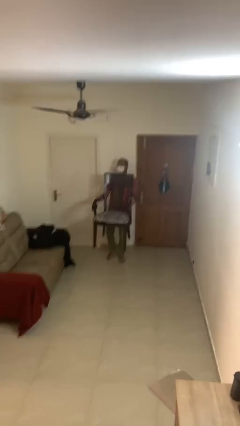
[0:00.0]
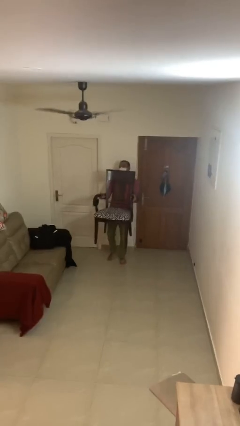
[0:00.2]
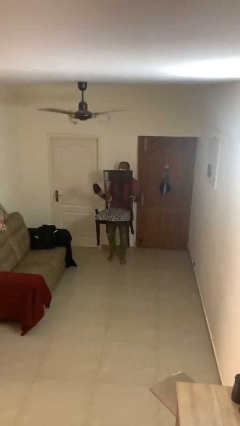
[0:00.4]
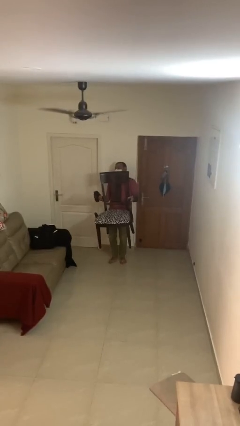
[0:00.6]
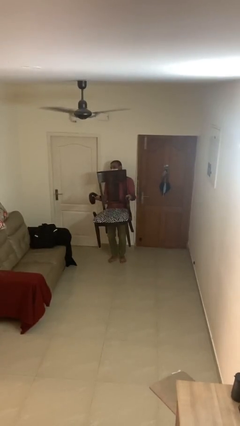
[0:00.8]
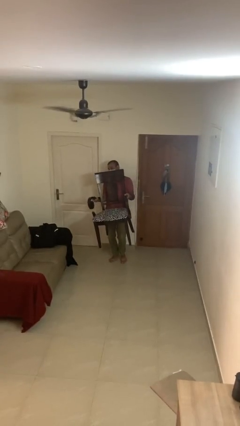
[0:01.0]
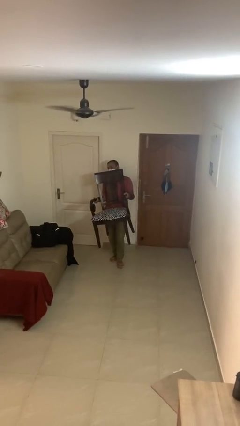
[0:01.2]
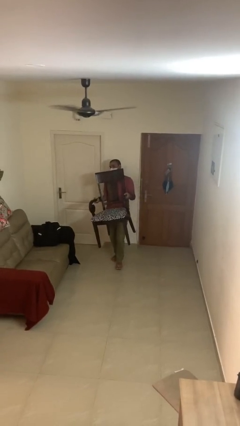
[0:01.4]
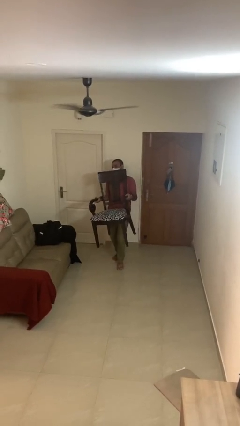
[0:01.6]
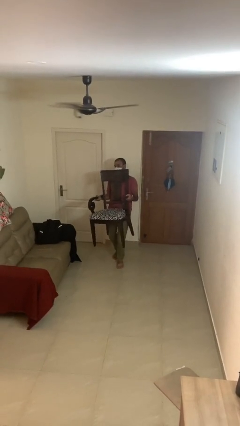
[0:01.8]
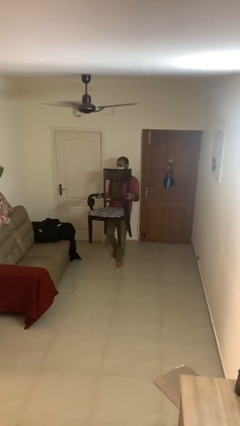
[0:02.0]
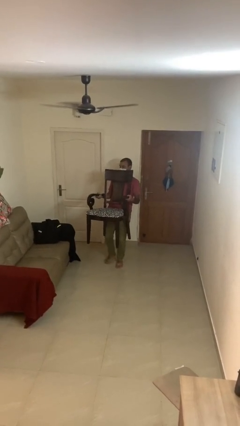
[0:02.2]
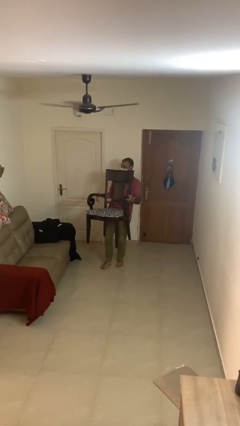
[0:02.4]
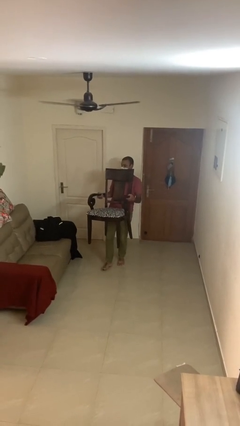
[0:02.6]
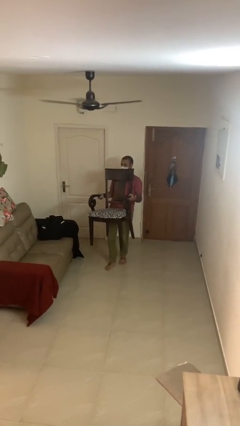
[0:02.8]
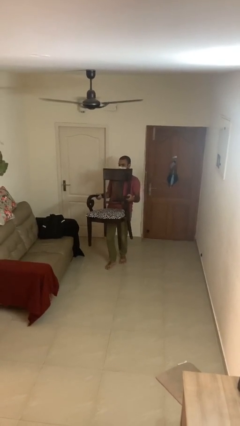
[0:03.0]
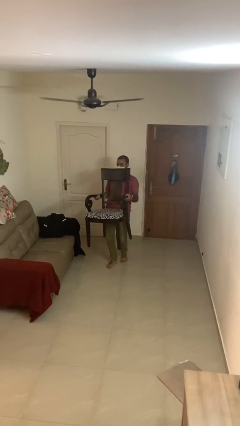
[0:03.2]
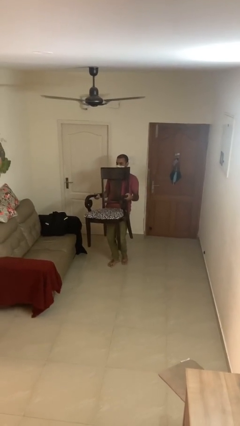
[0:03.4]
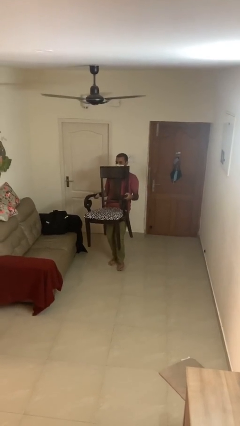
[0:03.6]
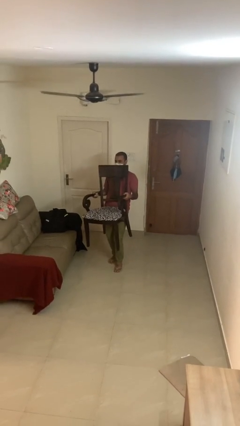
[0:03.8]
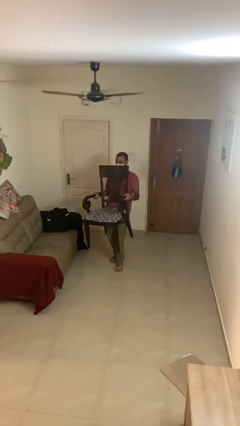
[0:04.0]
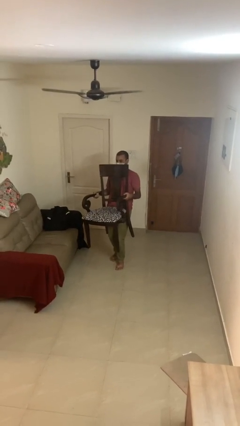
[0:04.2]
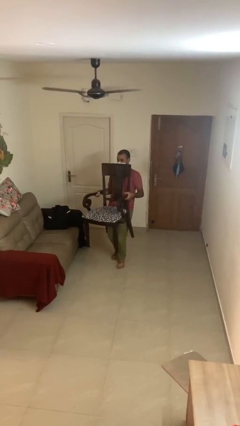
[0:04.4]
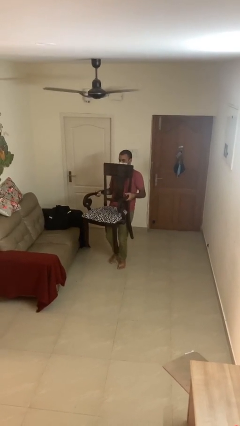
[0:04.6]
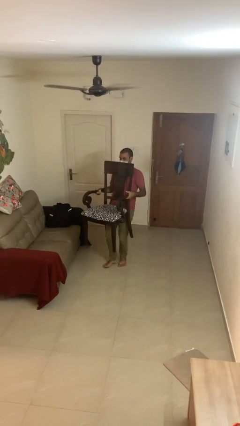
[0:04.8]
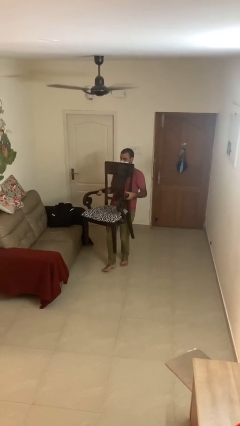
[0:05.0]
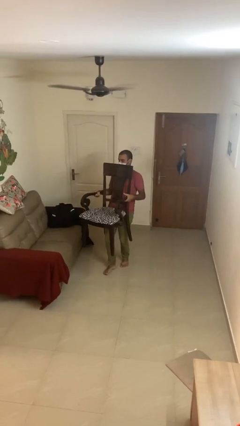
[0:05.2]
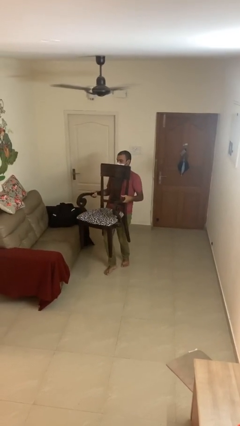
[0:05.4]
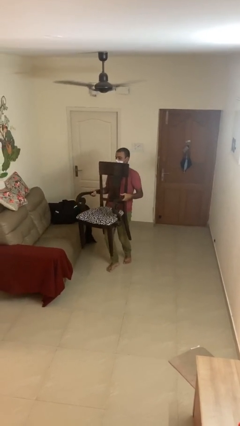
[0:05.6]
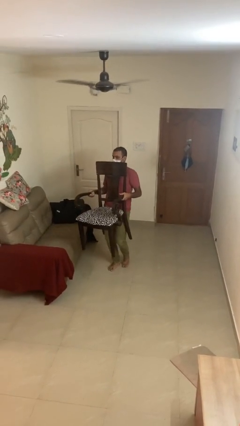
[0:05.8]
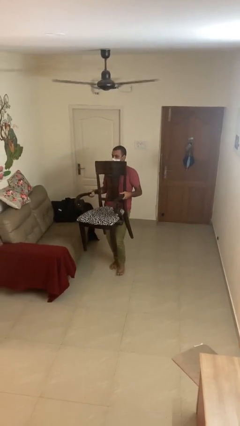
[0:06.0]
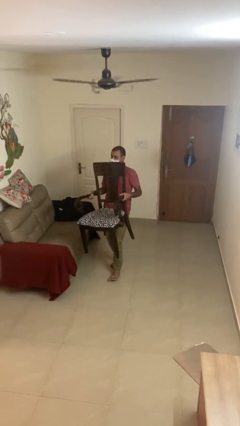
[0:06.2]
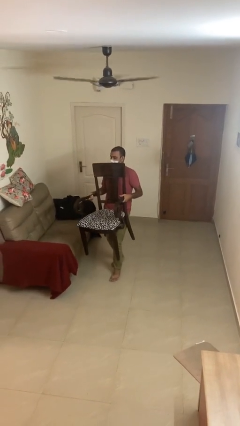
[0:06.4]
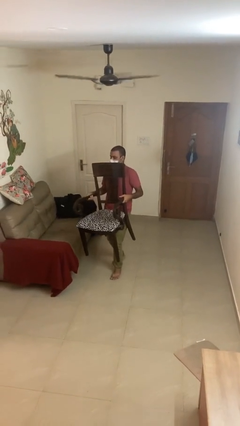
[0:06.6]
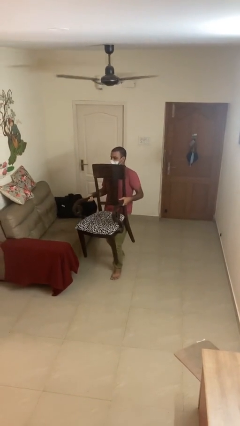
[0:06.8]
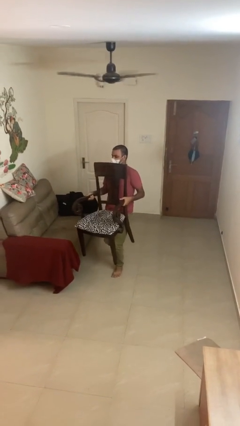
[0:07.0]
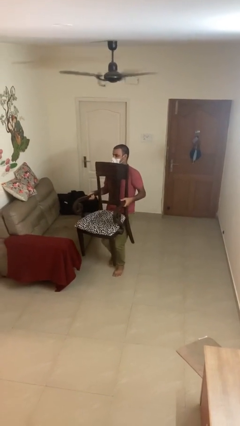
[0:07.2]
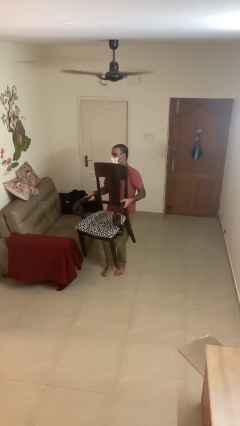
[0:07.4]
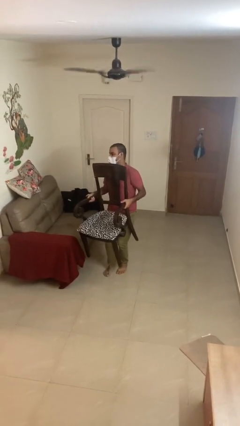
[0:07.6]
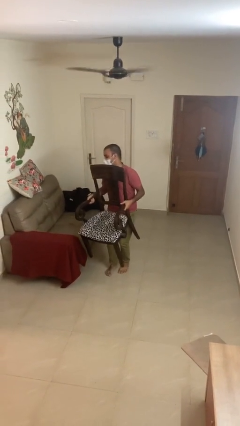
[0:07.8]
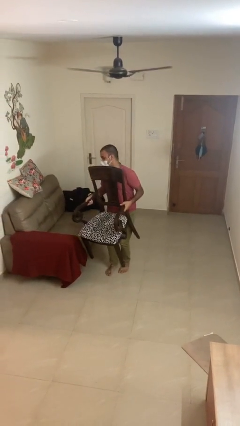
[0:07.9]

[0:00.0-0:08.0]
person carries heavy object

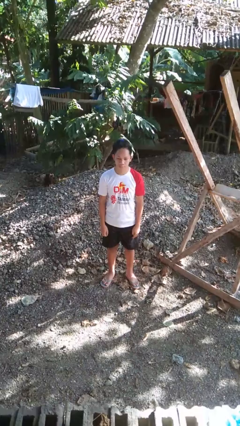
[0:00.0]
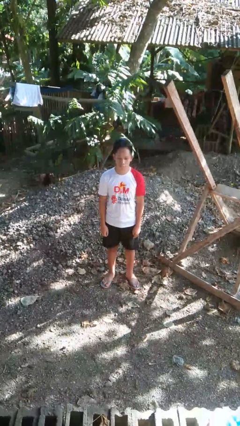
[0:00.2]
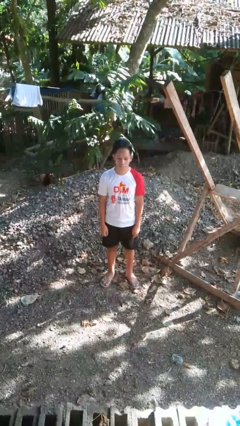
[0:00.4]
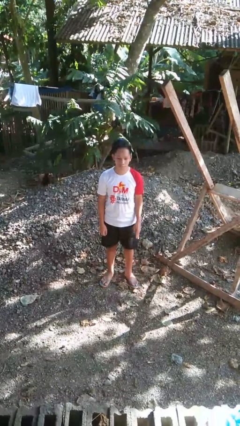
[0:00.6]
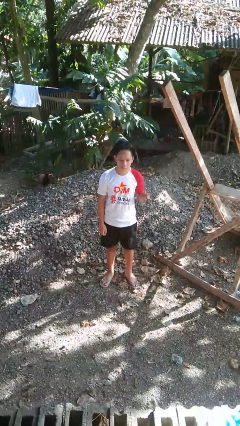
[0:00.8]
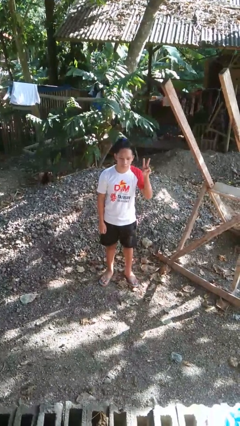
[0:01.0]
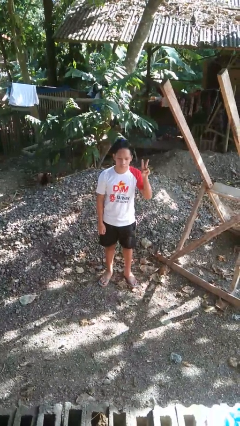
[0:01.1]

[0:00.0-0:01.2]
person gestures peace

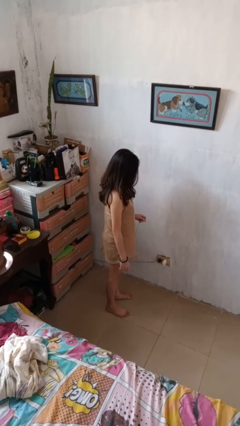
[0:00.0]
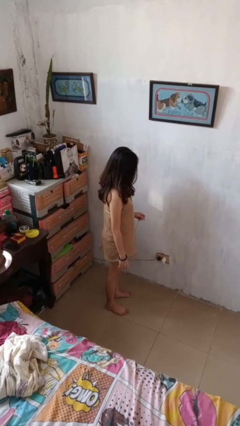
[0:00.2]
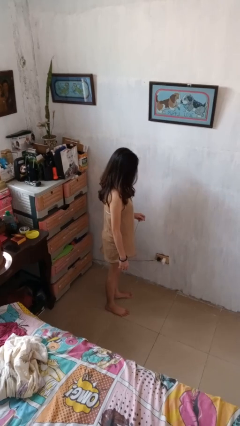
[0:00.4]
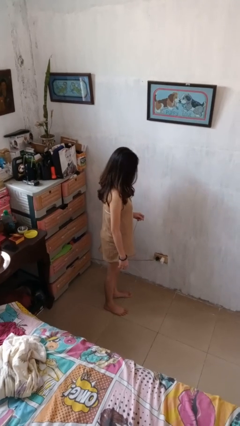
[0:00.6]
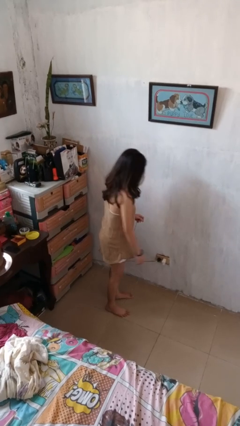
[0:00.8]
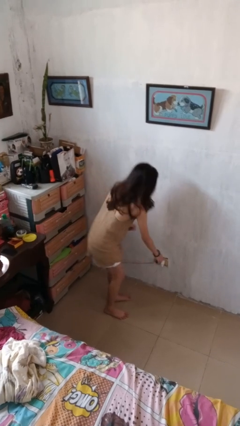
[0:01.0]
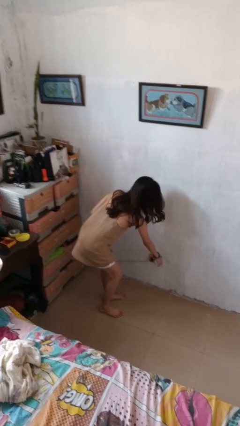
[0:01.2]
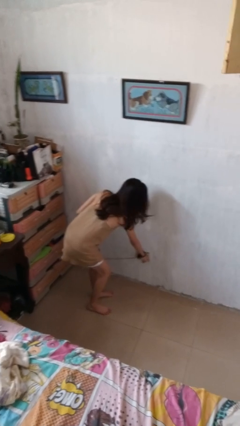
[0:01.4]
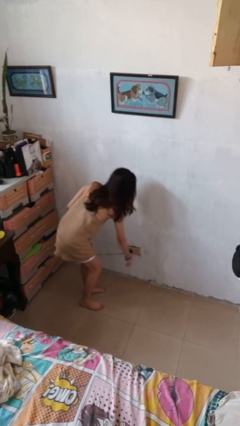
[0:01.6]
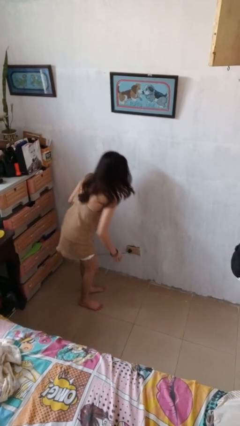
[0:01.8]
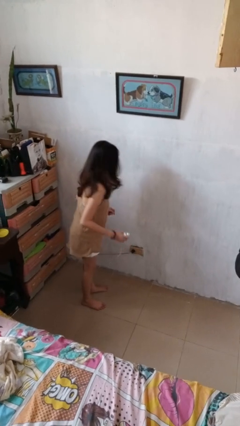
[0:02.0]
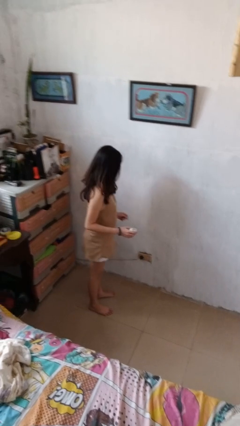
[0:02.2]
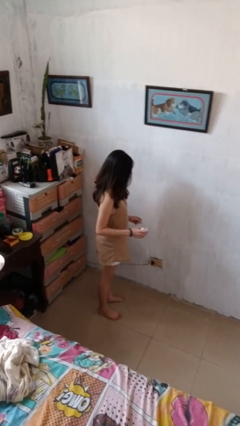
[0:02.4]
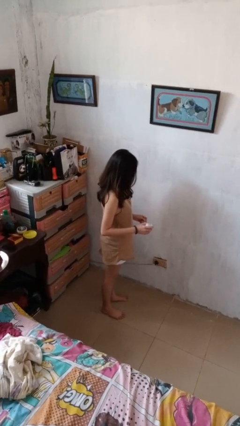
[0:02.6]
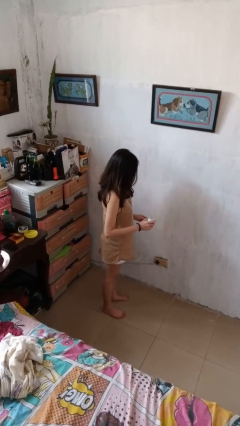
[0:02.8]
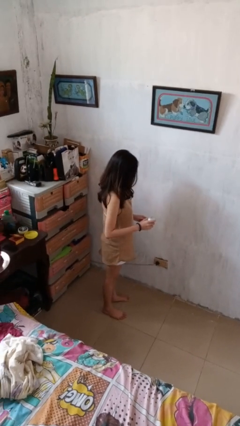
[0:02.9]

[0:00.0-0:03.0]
person unplugs from electrical socket

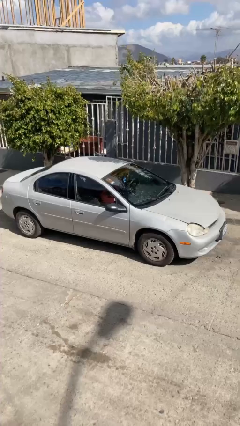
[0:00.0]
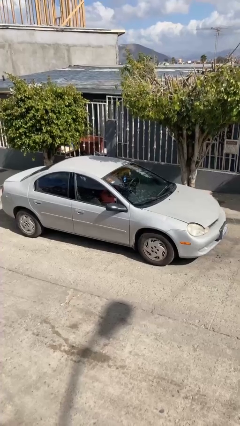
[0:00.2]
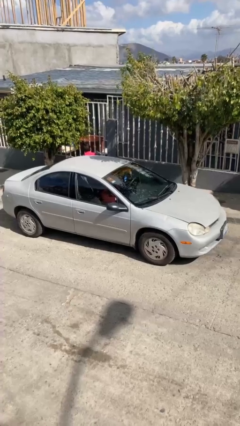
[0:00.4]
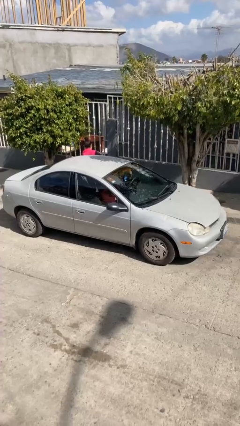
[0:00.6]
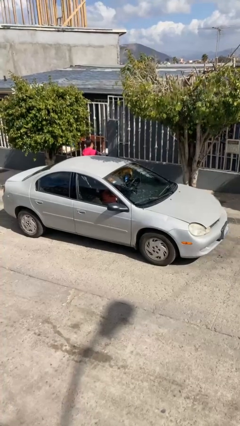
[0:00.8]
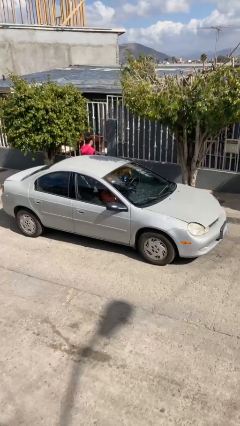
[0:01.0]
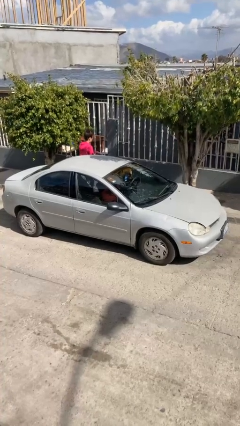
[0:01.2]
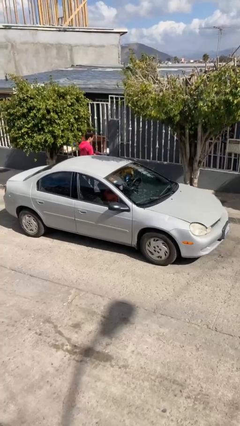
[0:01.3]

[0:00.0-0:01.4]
car drops off person

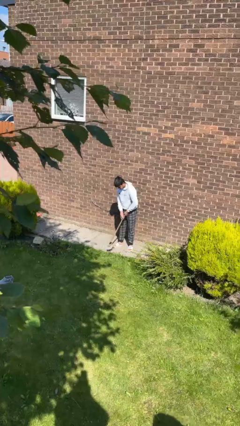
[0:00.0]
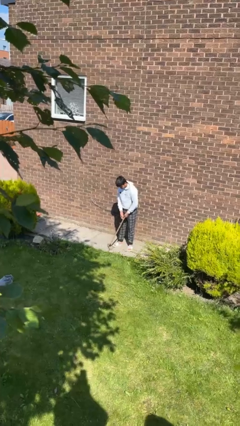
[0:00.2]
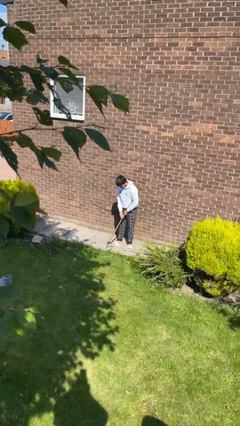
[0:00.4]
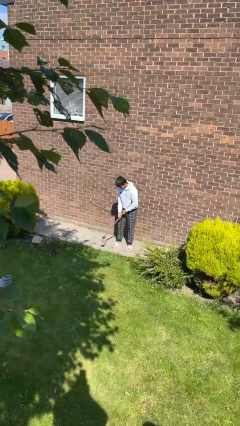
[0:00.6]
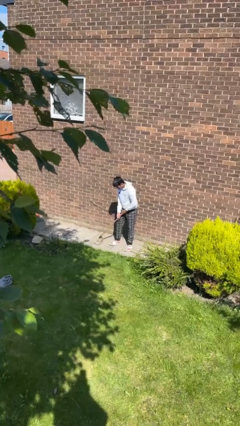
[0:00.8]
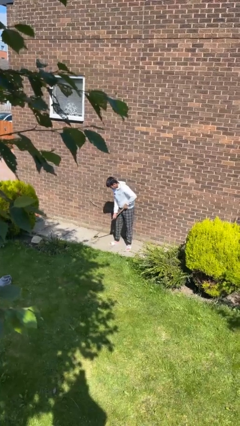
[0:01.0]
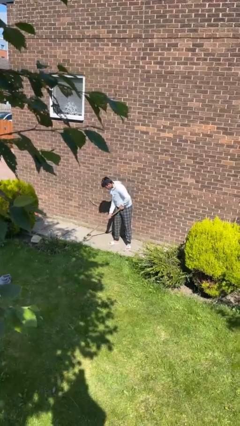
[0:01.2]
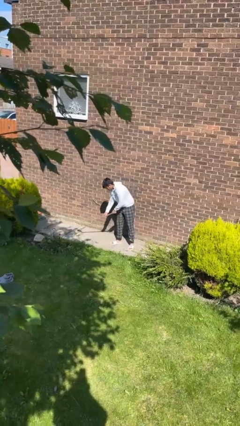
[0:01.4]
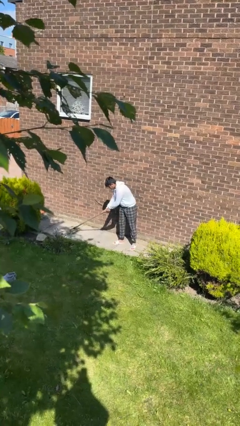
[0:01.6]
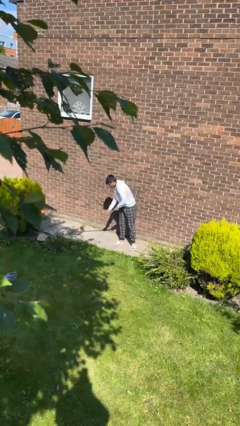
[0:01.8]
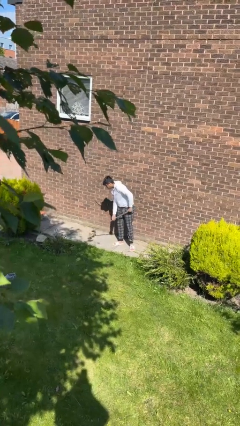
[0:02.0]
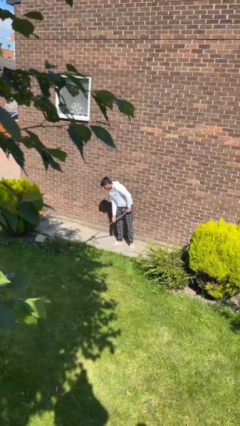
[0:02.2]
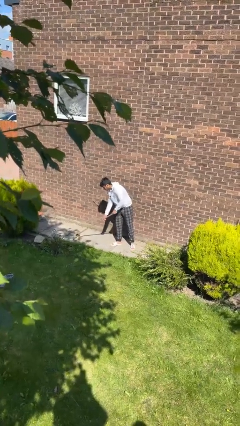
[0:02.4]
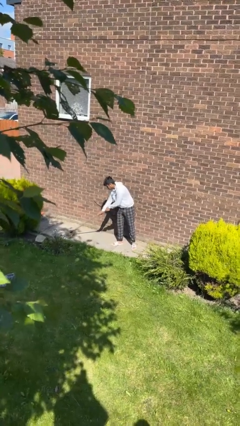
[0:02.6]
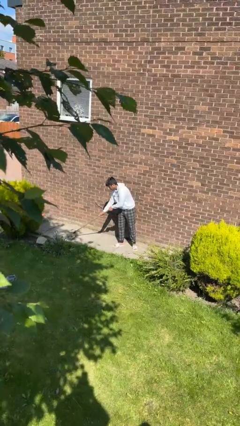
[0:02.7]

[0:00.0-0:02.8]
person sweeps floor

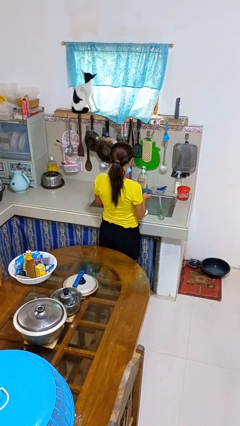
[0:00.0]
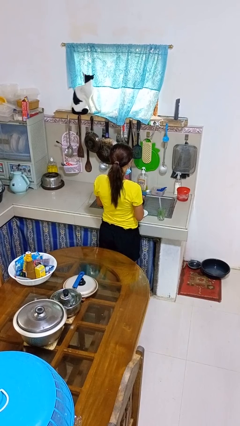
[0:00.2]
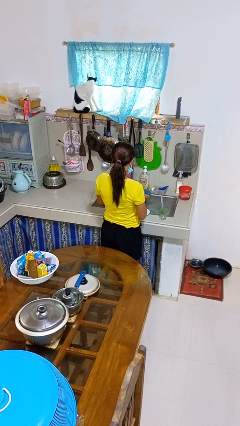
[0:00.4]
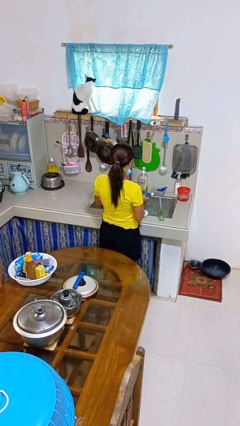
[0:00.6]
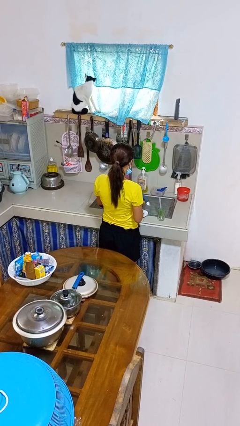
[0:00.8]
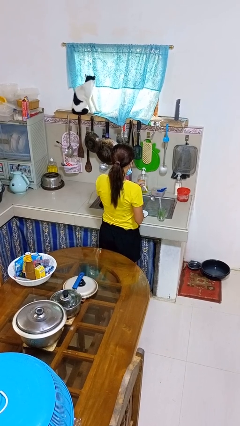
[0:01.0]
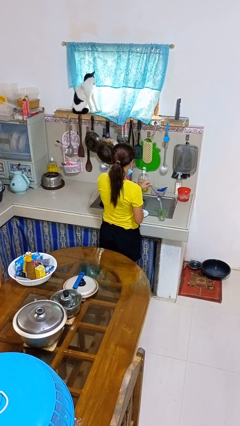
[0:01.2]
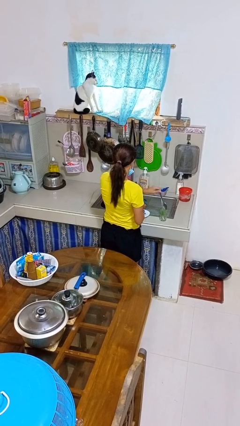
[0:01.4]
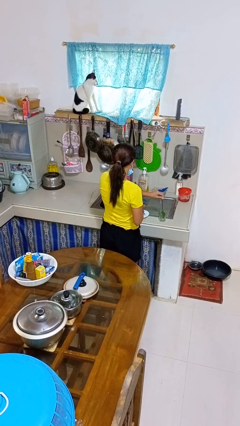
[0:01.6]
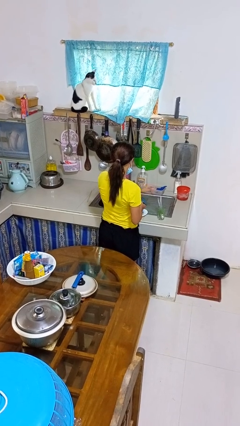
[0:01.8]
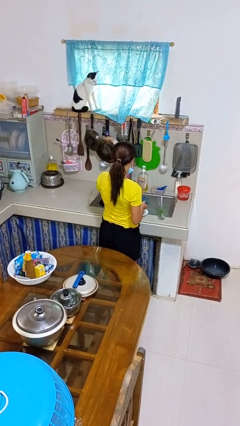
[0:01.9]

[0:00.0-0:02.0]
person dries dish
